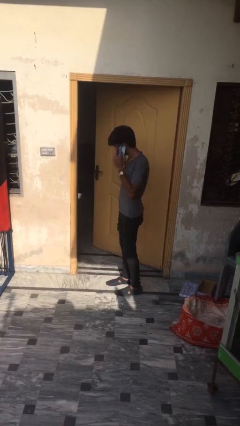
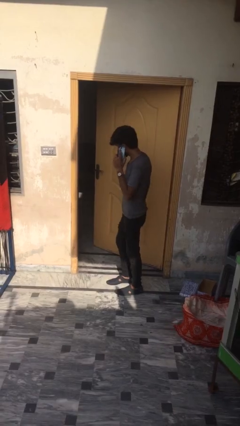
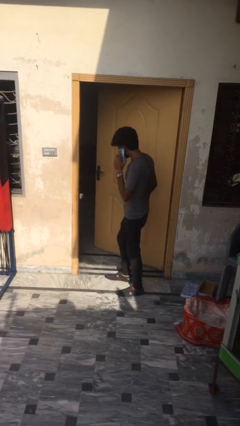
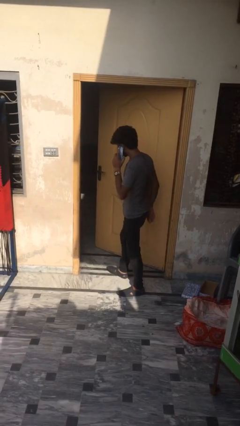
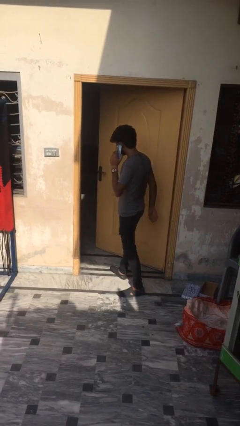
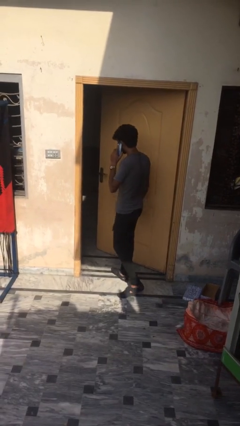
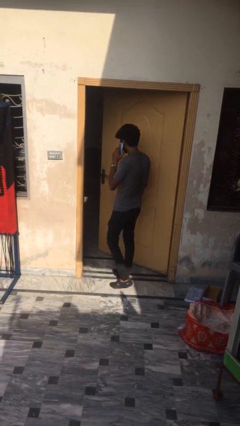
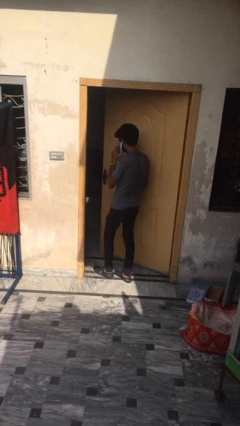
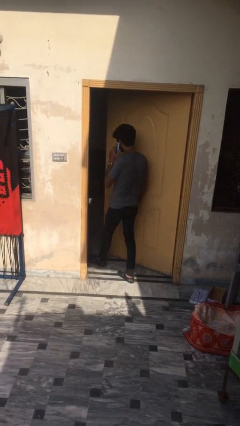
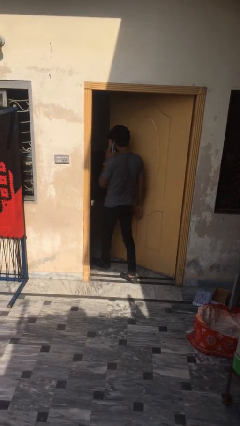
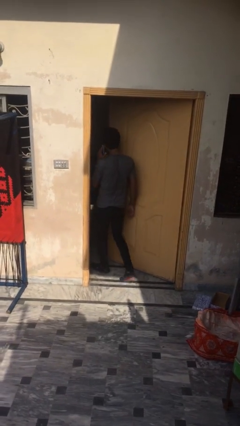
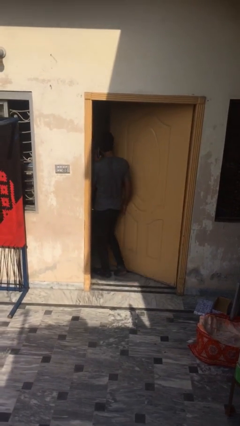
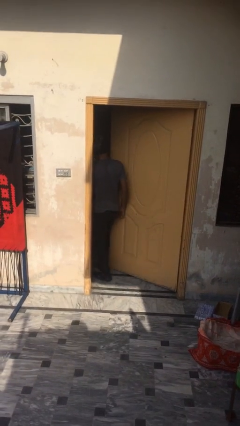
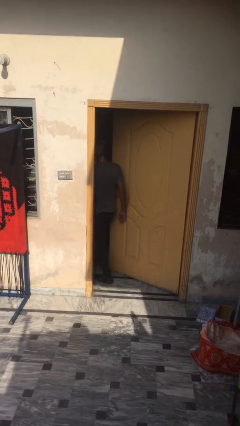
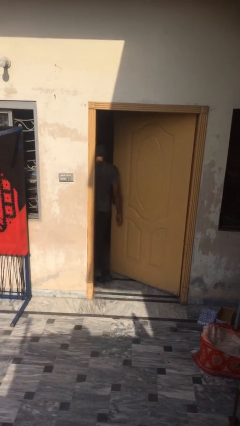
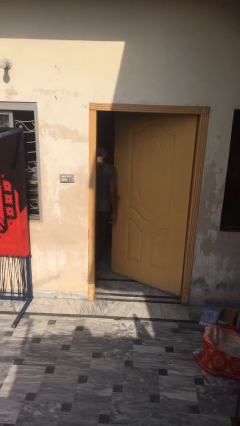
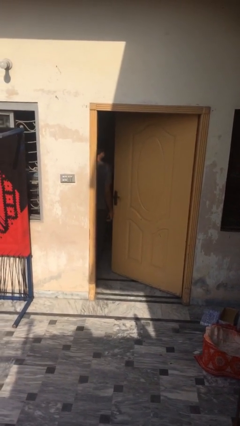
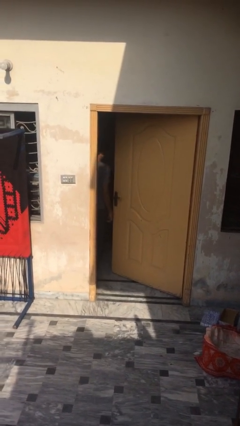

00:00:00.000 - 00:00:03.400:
person exits scene through structure

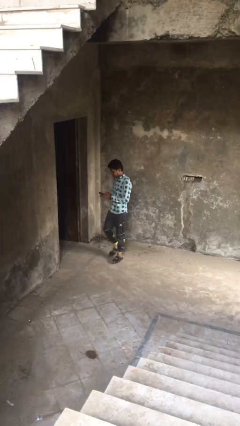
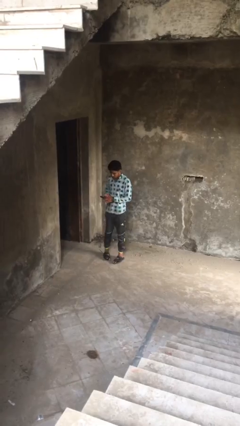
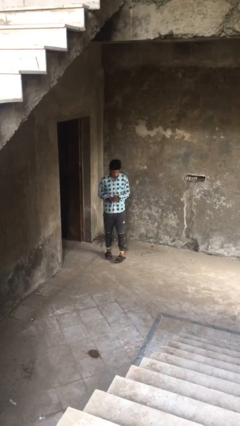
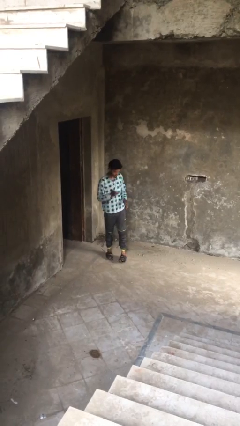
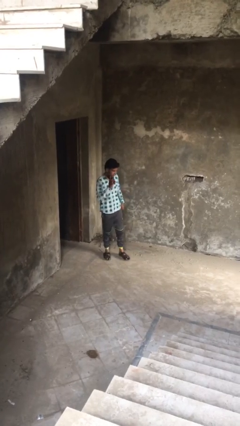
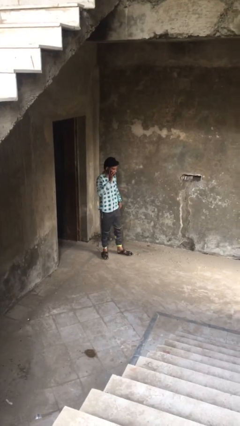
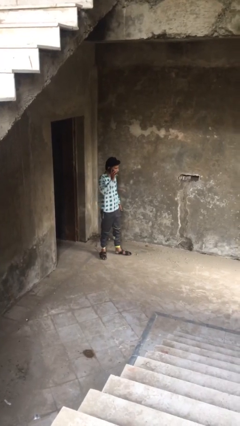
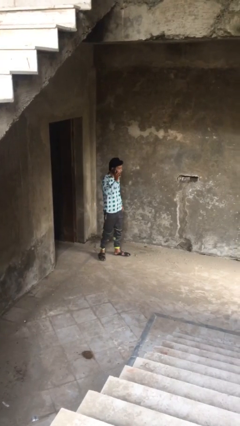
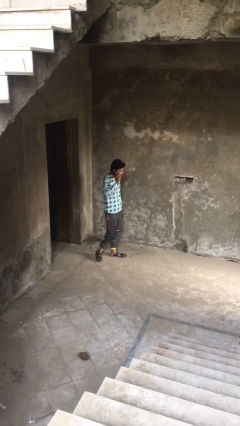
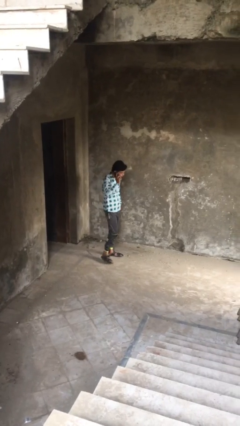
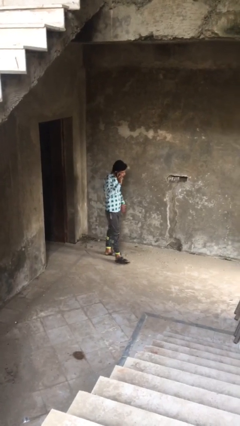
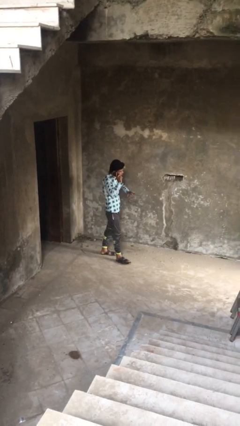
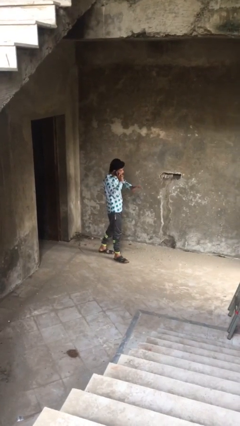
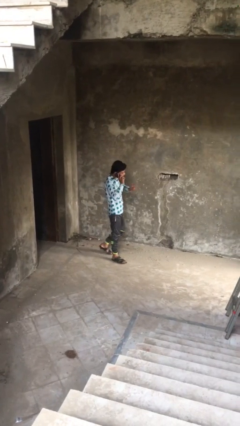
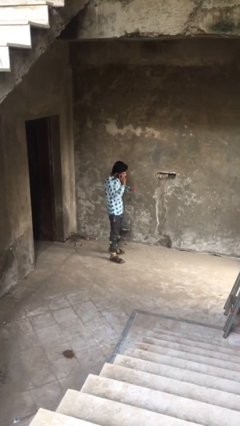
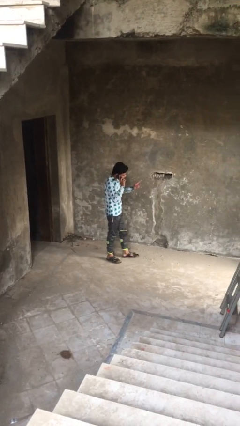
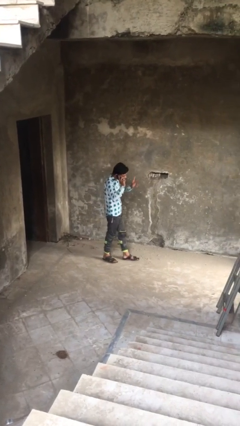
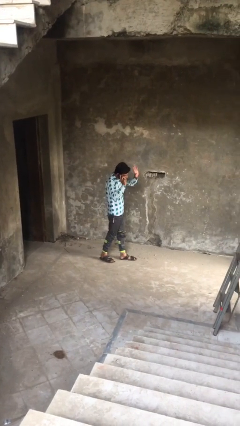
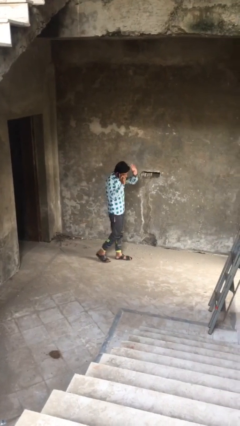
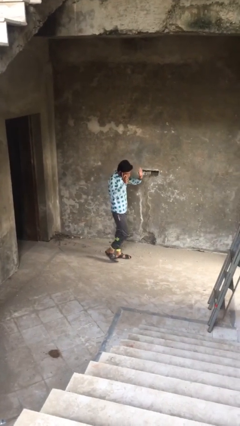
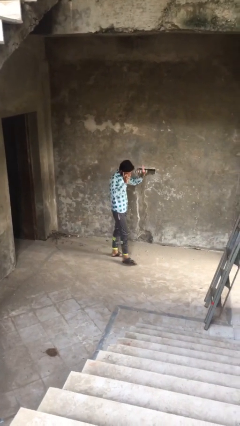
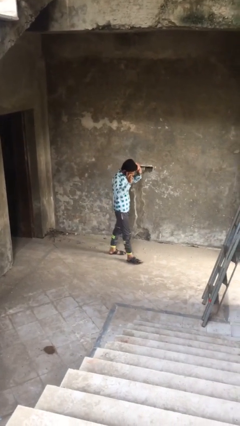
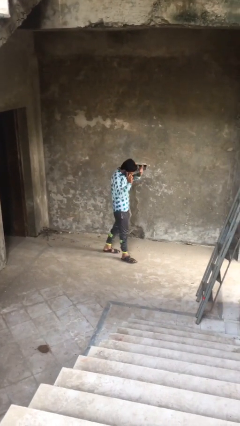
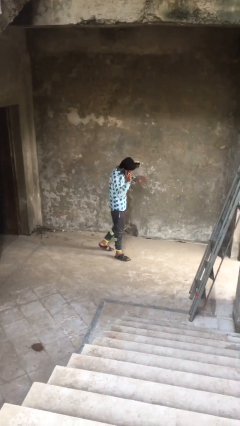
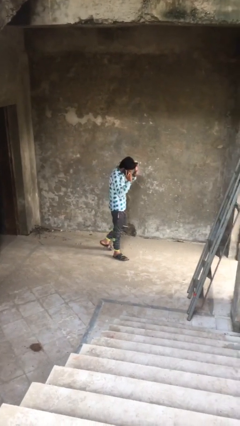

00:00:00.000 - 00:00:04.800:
person talks on phone

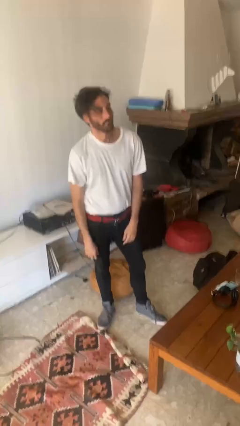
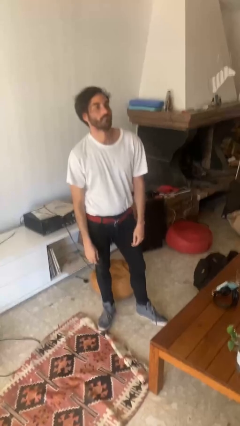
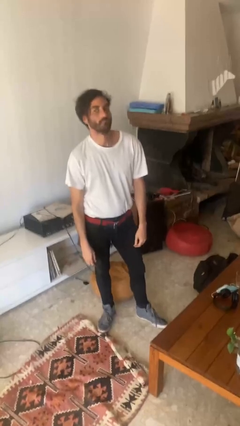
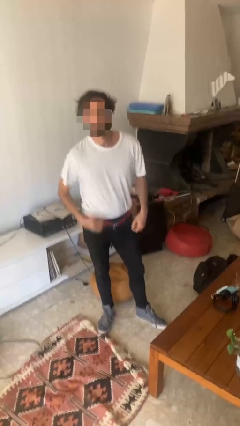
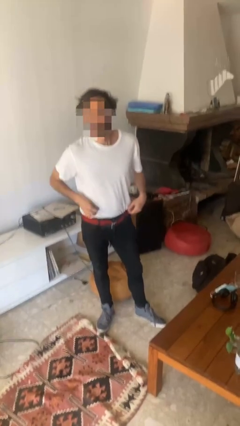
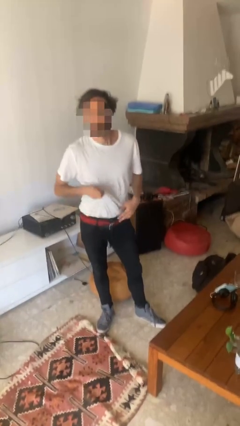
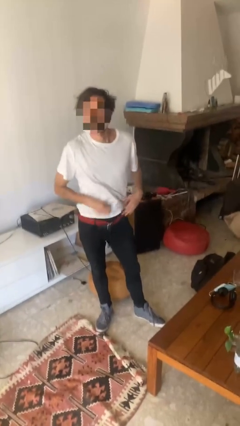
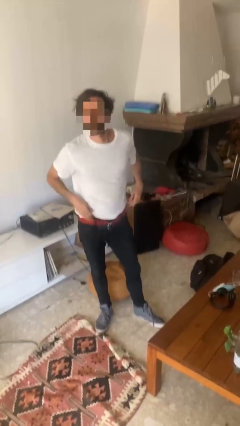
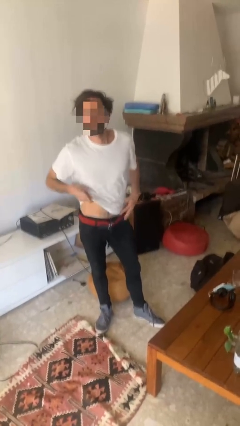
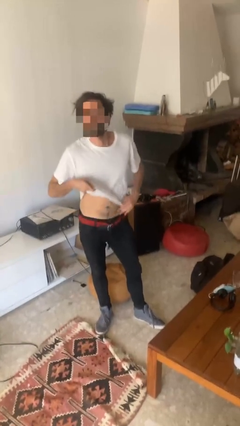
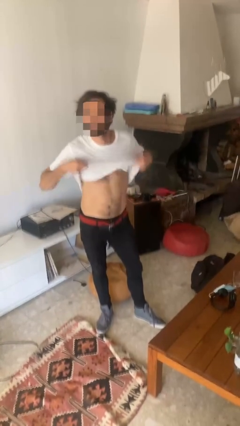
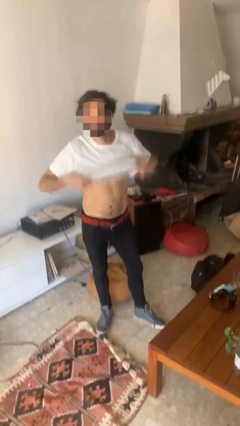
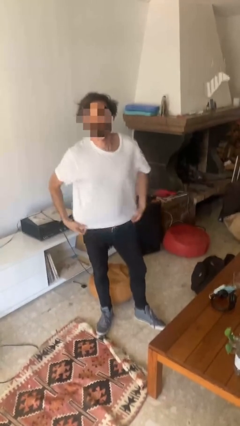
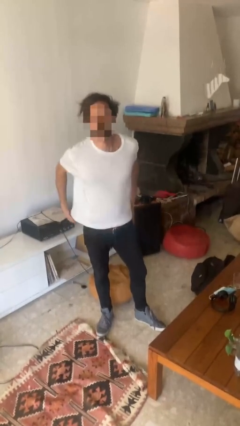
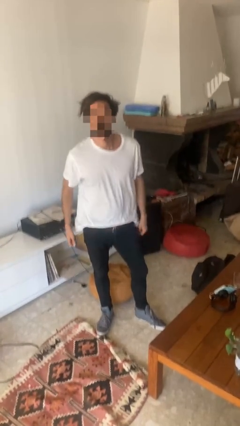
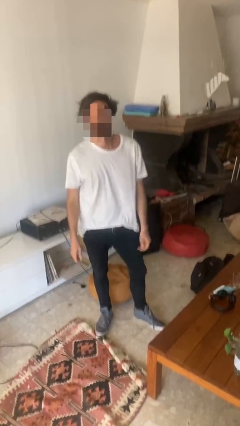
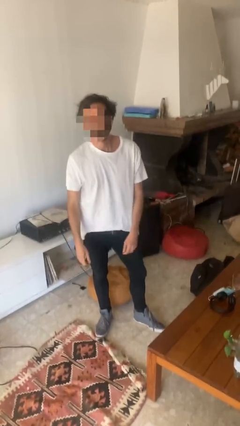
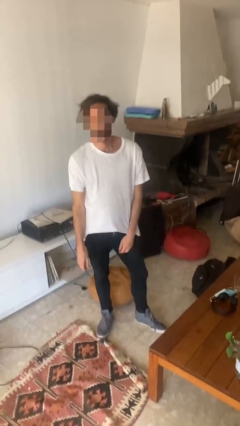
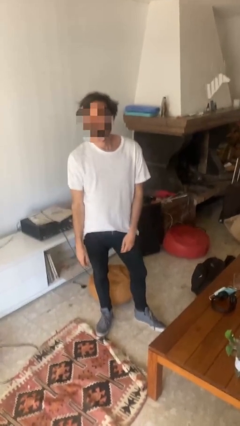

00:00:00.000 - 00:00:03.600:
person untucks shirt

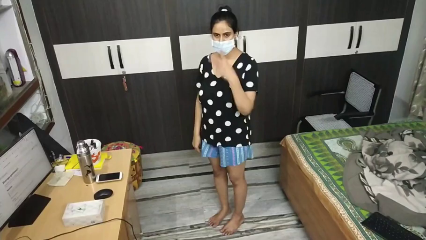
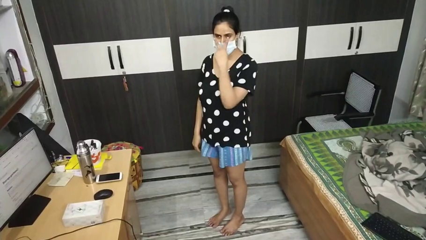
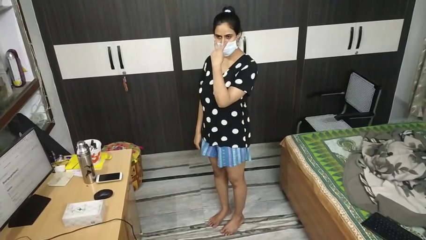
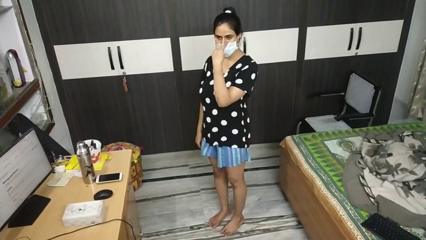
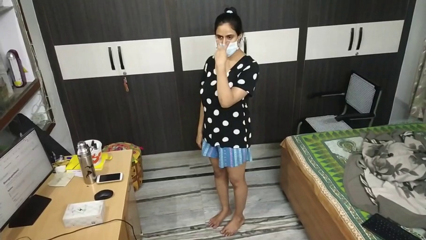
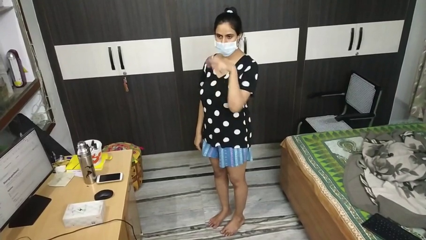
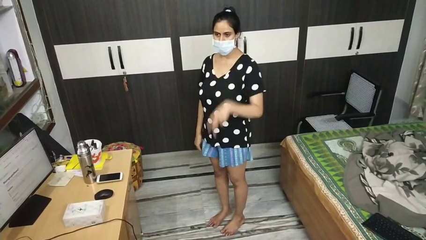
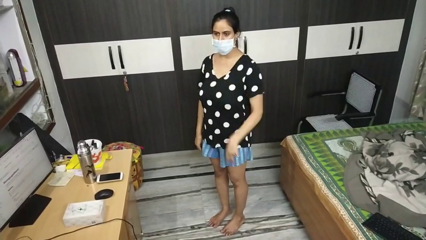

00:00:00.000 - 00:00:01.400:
person gestures watch closely

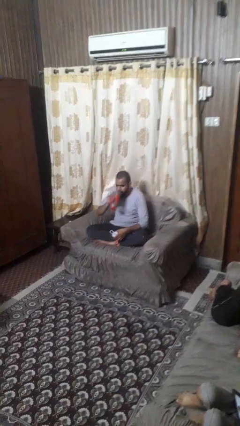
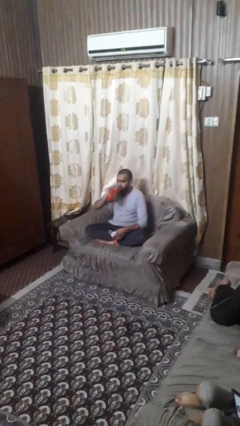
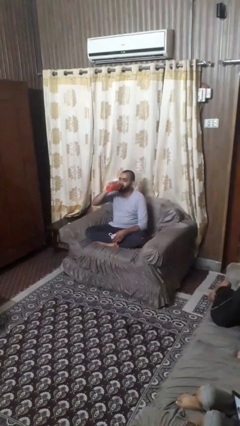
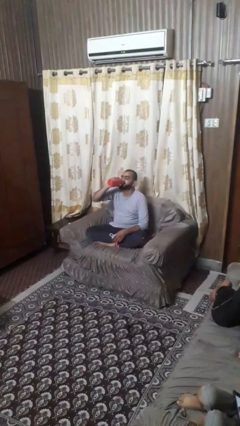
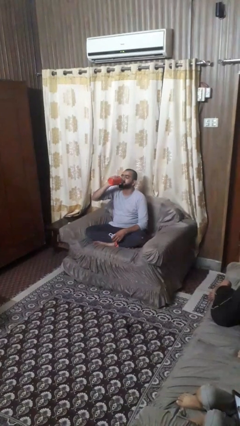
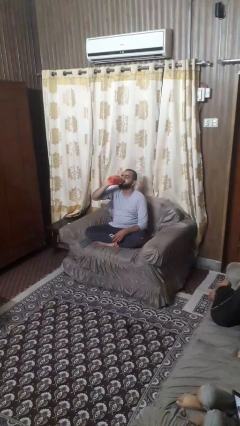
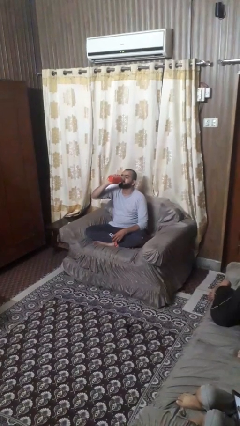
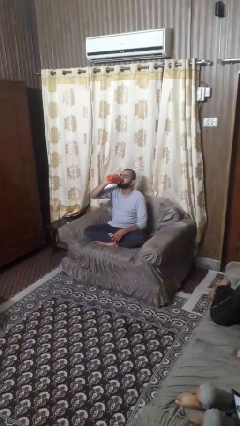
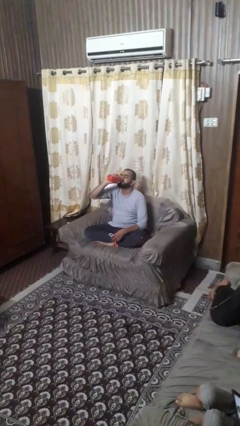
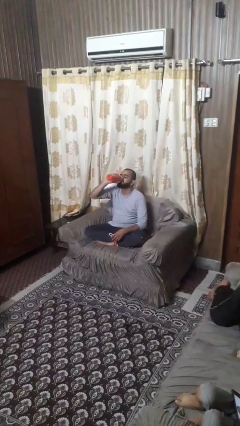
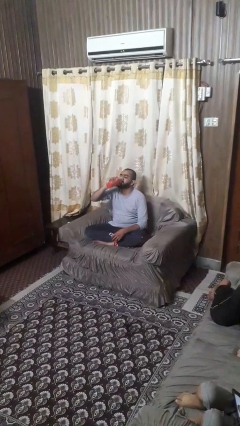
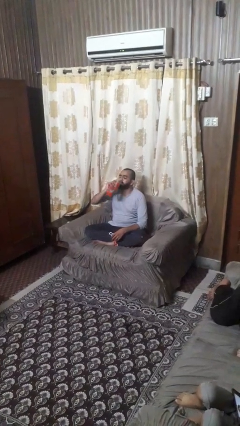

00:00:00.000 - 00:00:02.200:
person drinks from bottle

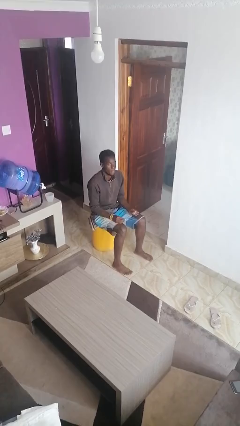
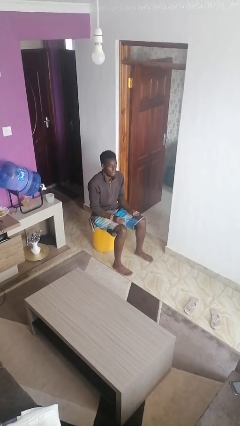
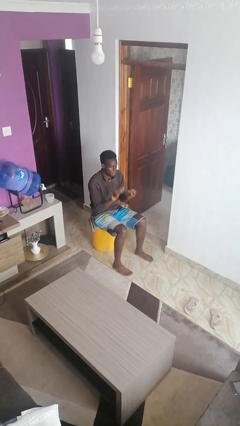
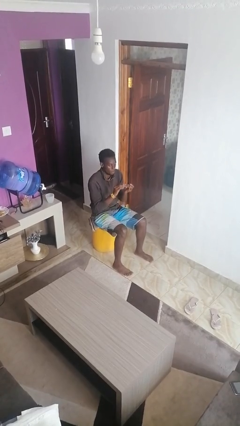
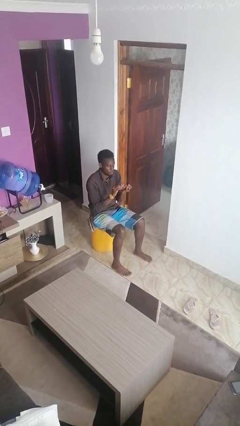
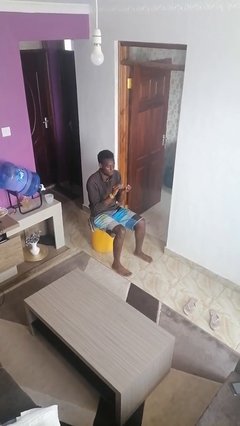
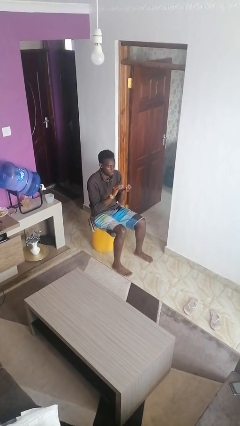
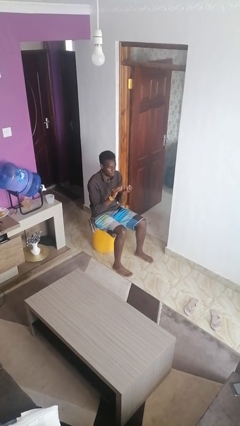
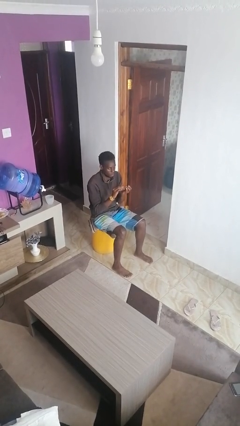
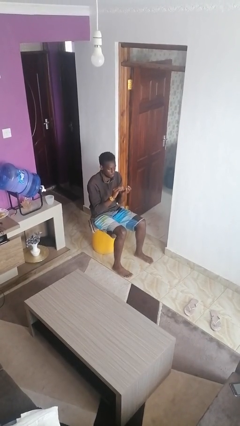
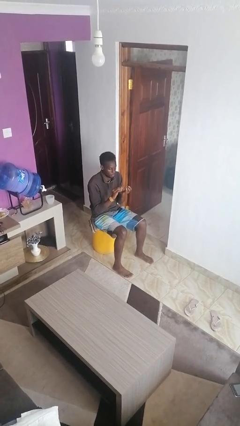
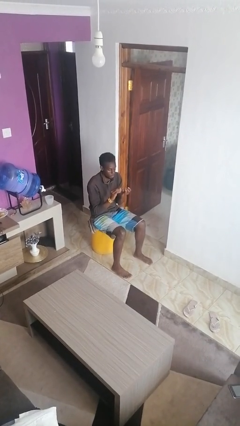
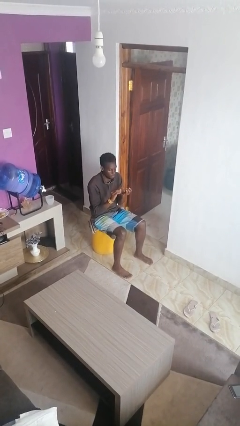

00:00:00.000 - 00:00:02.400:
person files fingernails
